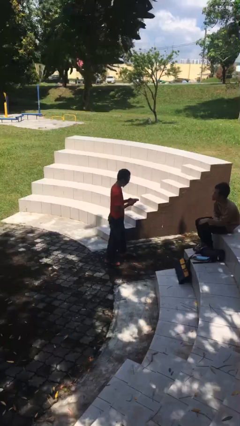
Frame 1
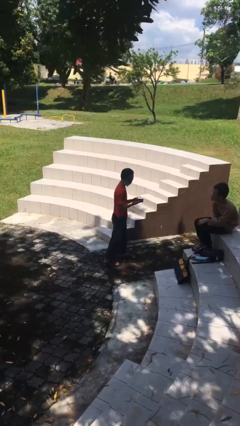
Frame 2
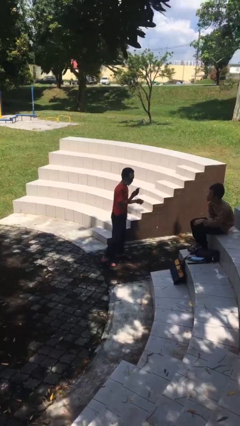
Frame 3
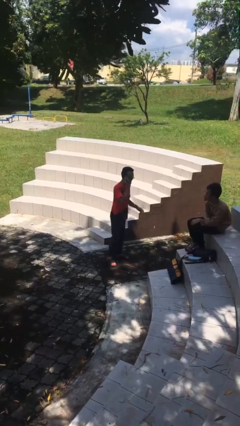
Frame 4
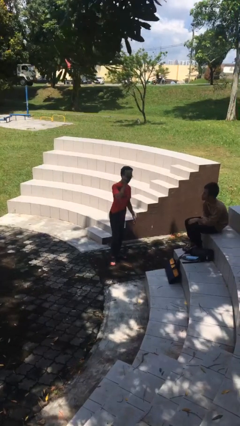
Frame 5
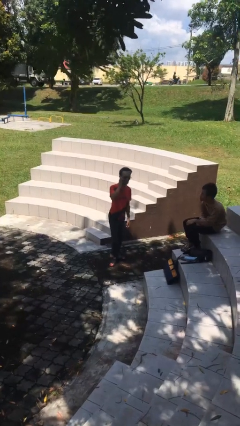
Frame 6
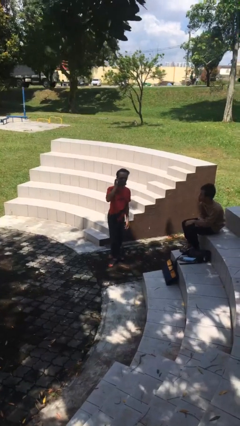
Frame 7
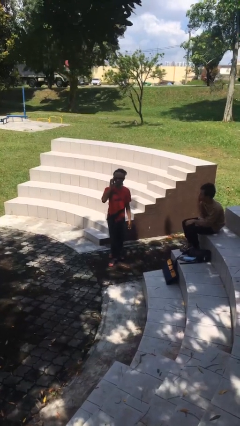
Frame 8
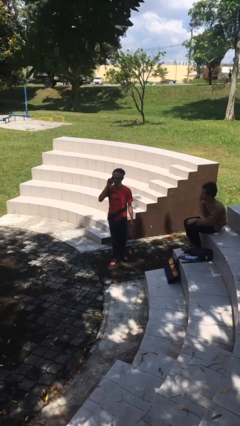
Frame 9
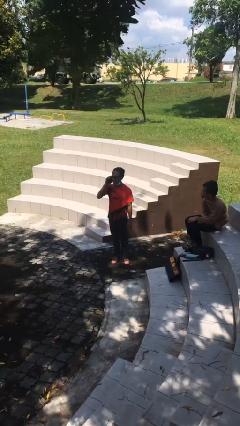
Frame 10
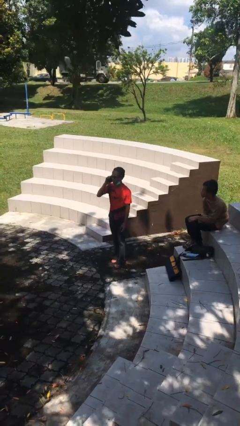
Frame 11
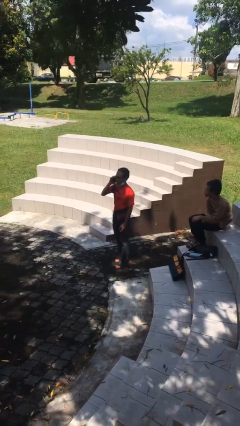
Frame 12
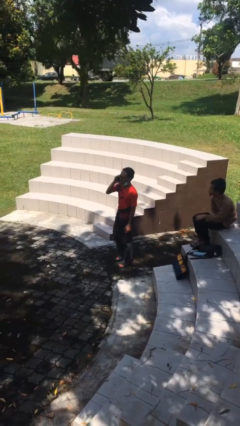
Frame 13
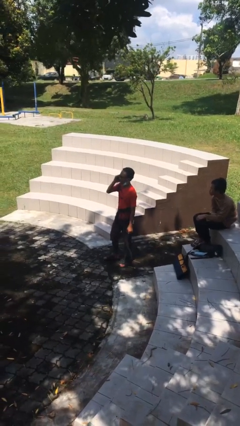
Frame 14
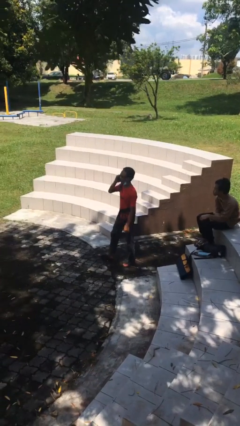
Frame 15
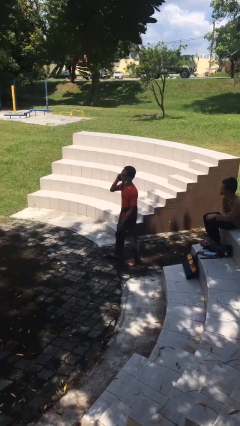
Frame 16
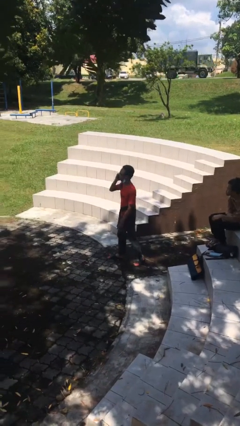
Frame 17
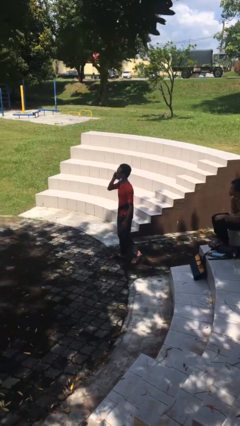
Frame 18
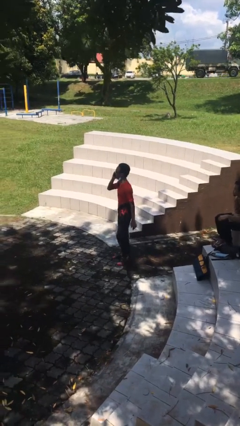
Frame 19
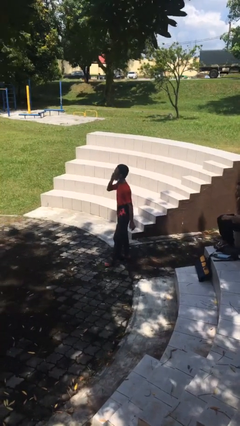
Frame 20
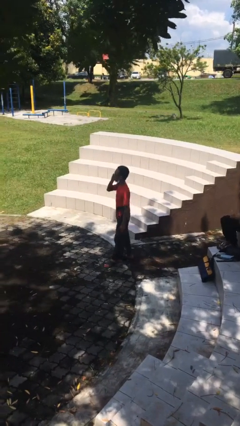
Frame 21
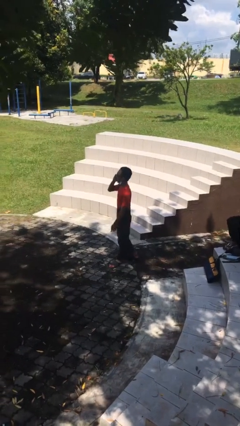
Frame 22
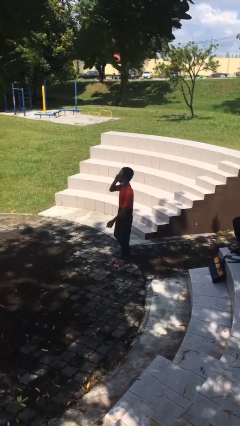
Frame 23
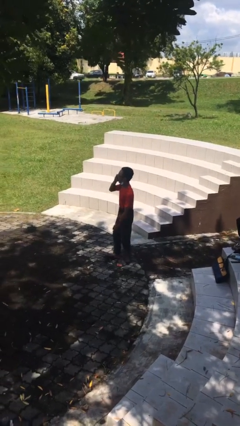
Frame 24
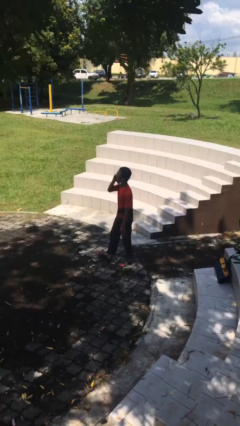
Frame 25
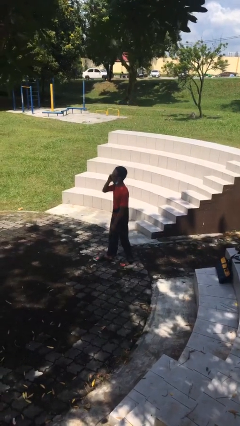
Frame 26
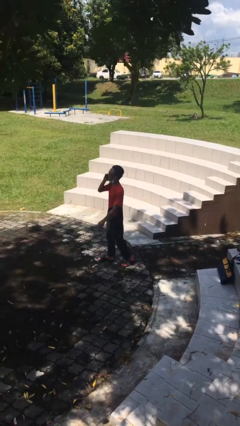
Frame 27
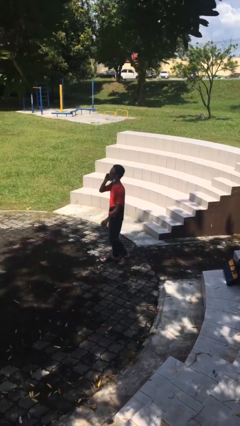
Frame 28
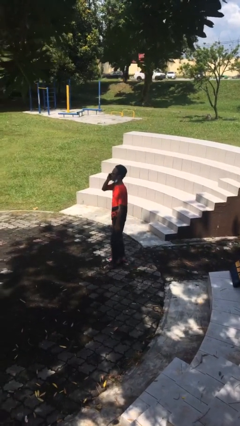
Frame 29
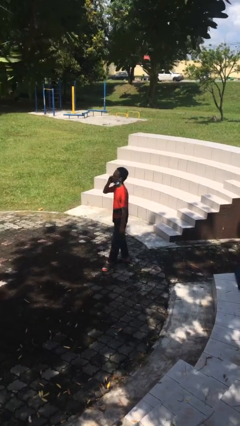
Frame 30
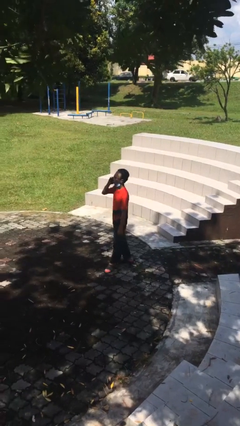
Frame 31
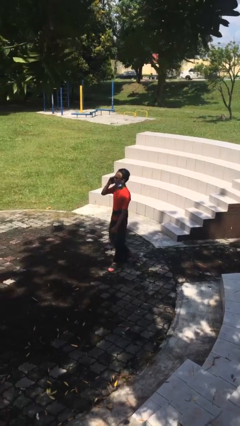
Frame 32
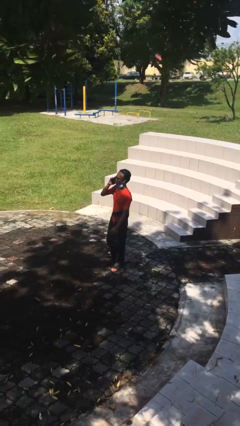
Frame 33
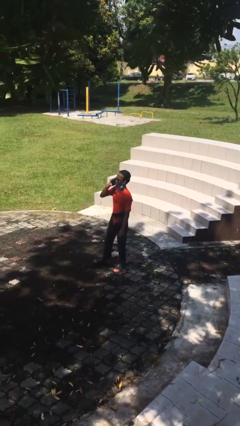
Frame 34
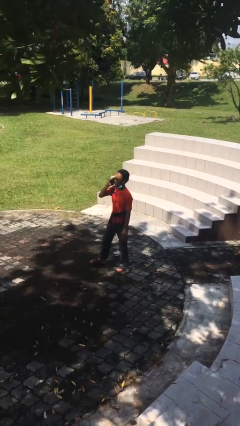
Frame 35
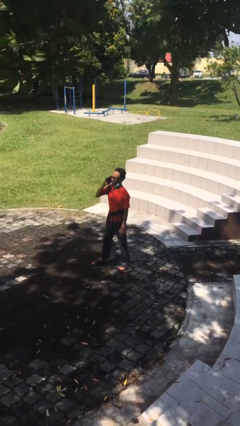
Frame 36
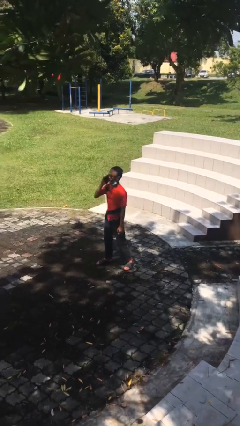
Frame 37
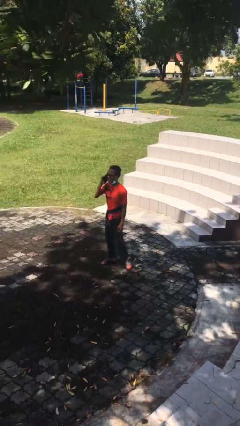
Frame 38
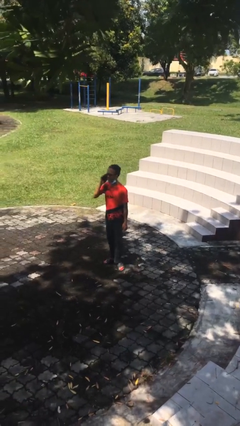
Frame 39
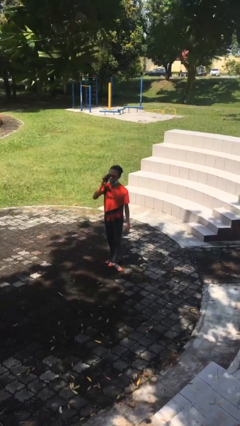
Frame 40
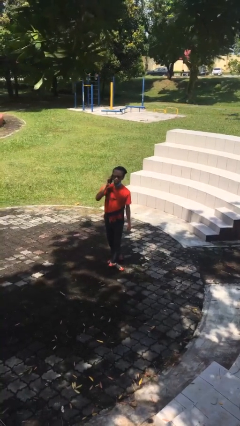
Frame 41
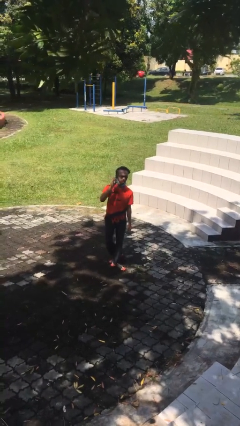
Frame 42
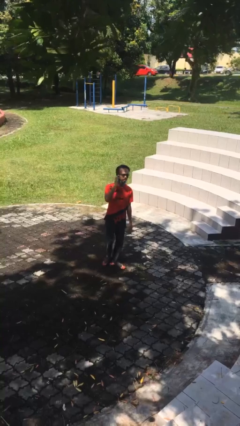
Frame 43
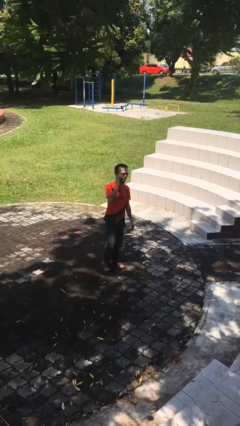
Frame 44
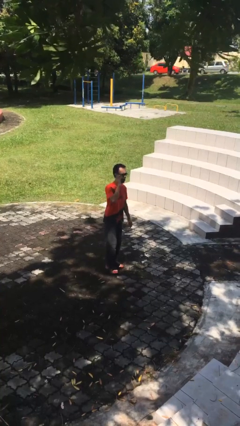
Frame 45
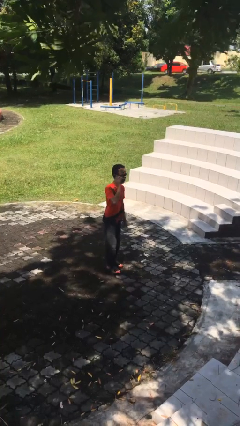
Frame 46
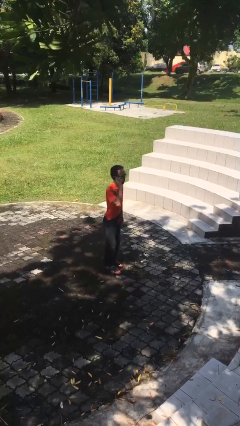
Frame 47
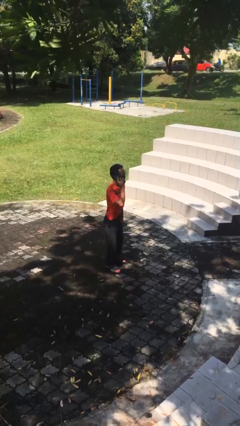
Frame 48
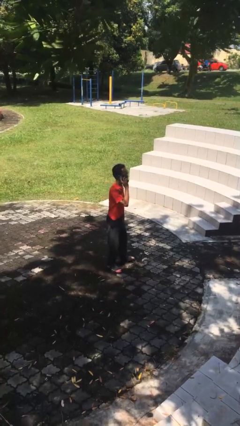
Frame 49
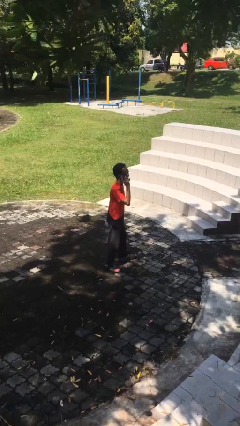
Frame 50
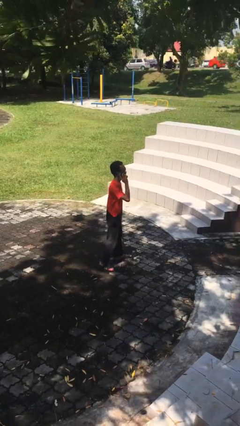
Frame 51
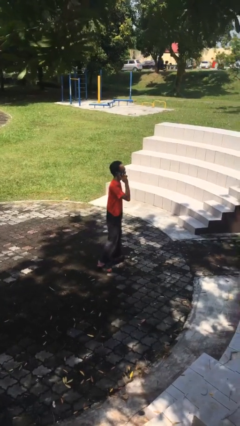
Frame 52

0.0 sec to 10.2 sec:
person talks on phone

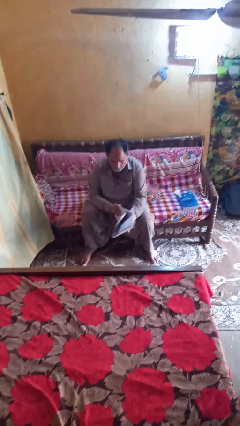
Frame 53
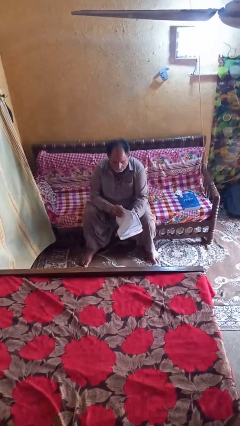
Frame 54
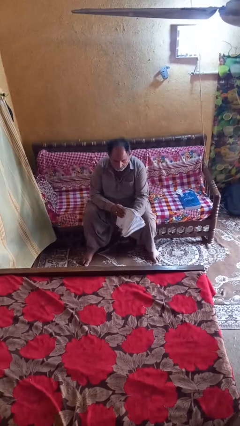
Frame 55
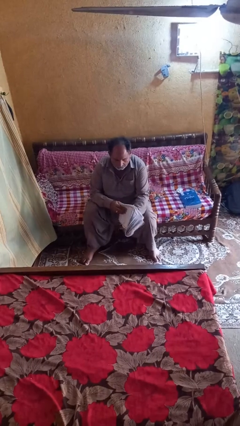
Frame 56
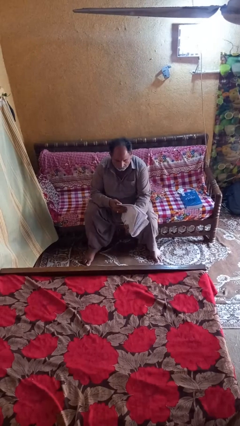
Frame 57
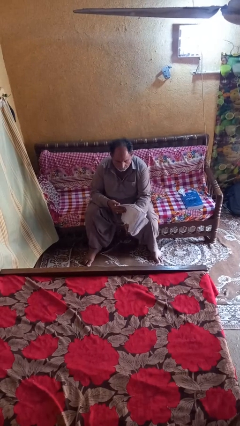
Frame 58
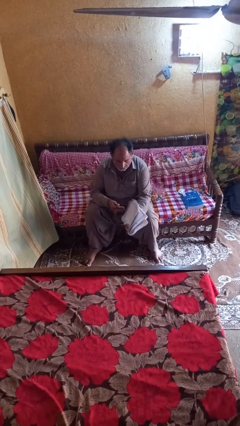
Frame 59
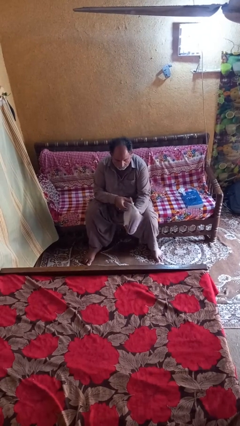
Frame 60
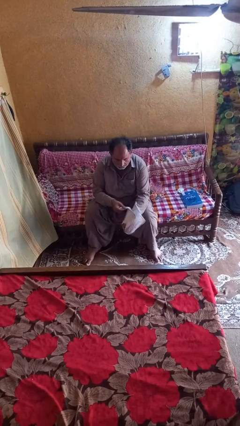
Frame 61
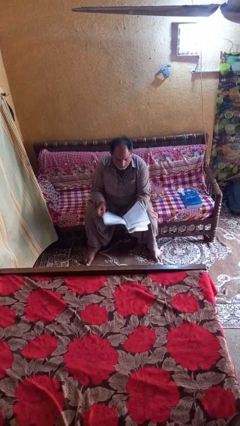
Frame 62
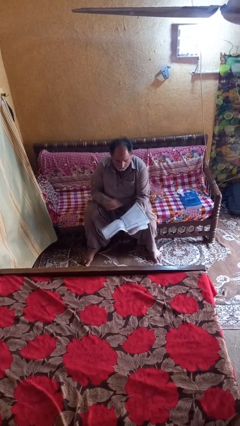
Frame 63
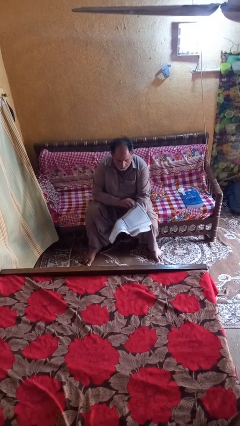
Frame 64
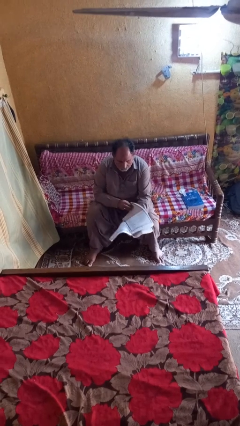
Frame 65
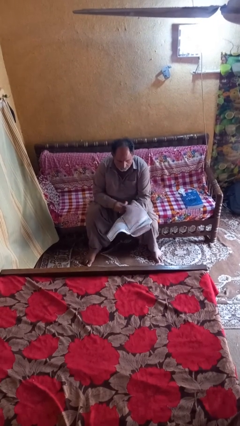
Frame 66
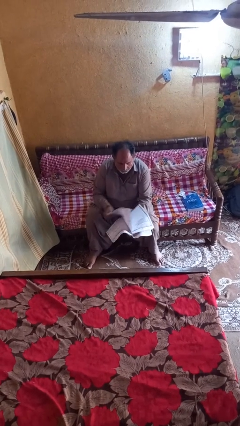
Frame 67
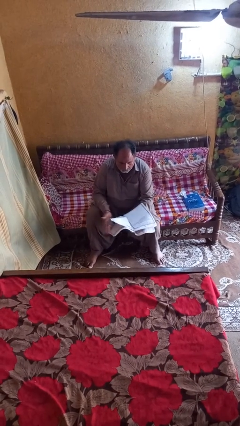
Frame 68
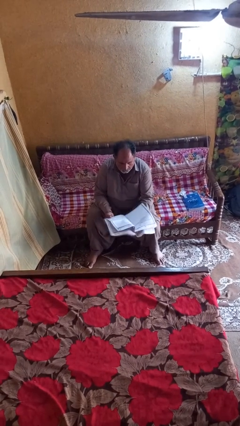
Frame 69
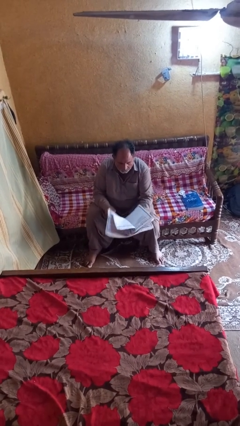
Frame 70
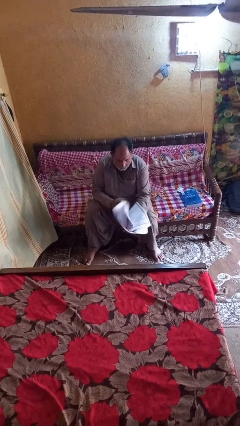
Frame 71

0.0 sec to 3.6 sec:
person reads magazine

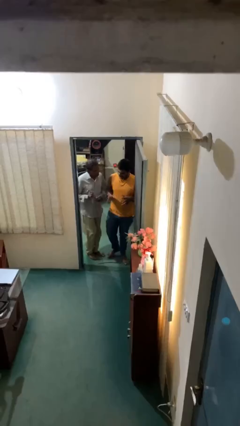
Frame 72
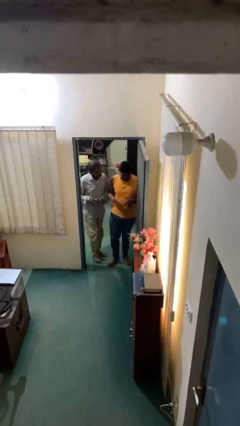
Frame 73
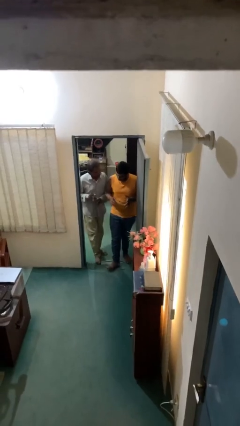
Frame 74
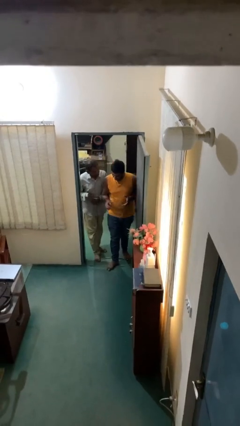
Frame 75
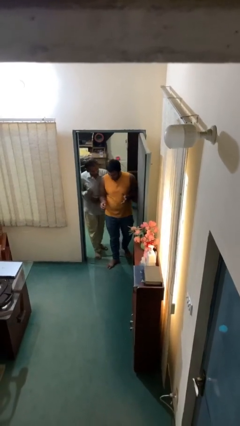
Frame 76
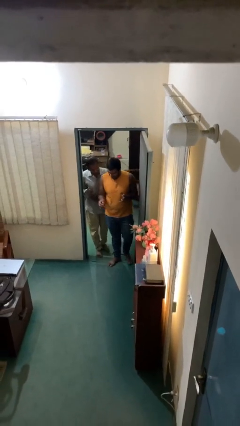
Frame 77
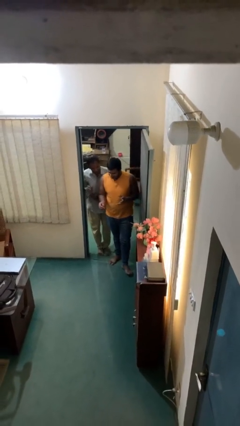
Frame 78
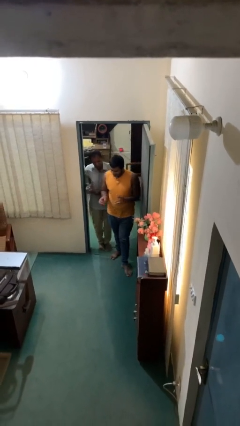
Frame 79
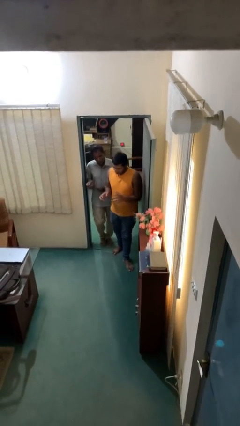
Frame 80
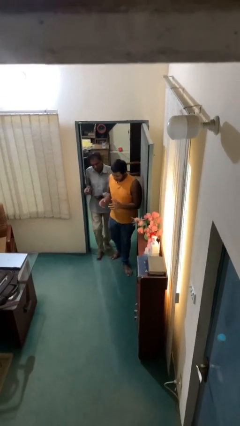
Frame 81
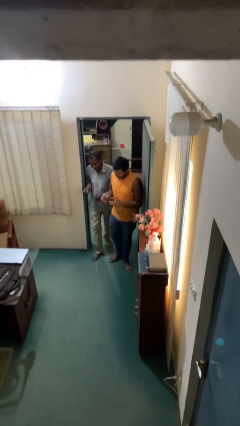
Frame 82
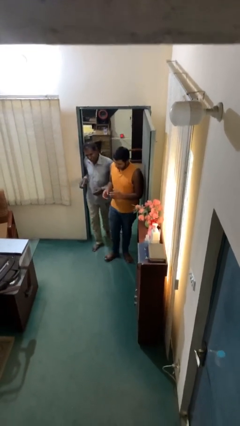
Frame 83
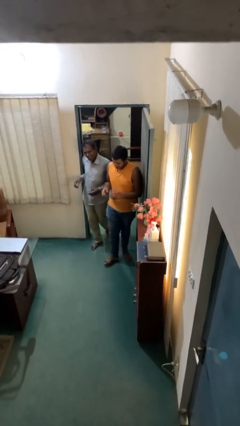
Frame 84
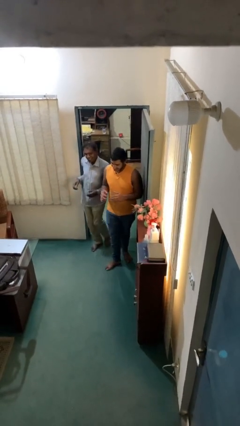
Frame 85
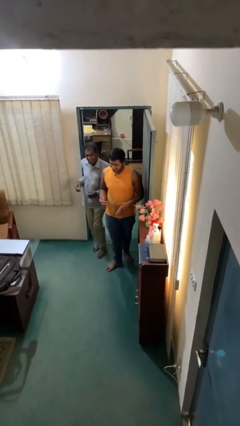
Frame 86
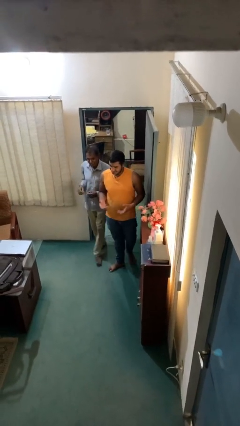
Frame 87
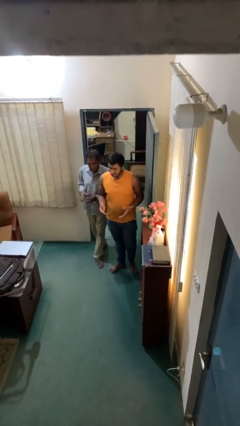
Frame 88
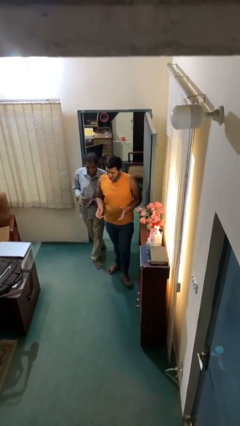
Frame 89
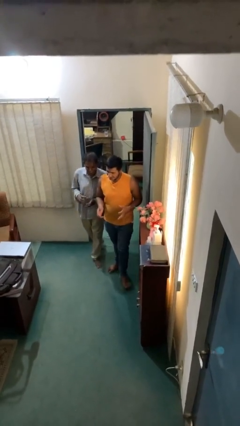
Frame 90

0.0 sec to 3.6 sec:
person talks to person

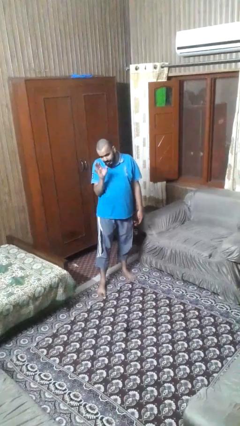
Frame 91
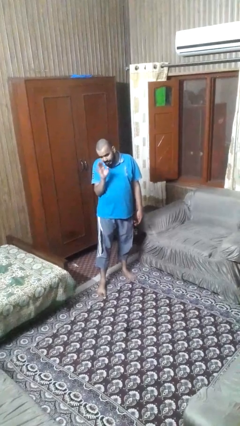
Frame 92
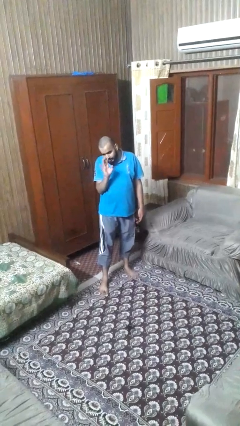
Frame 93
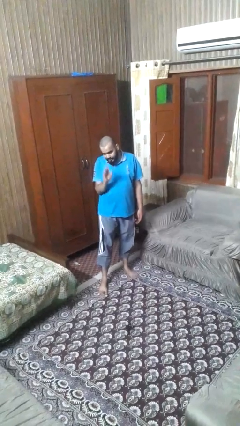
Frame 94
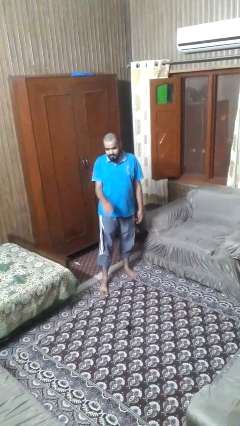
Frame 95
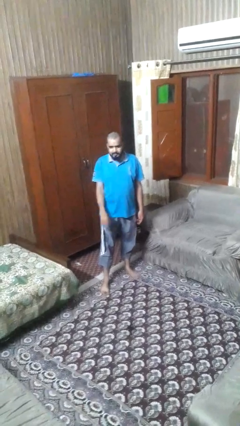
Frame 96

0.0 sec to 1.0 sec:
person waves at person
